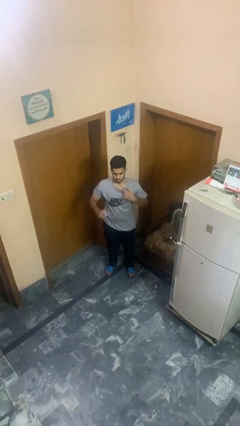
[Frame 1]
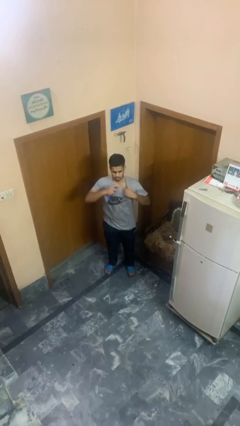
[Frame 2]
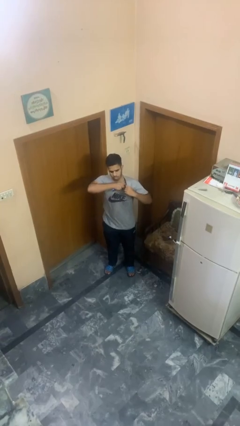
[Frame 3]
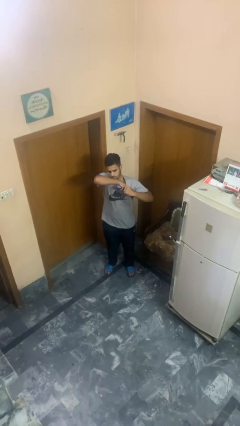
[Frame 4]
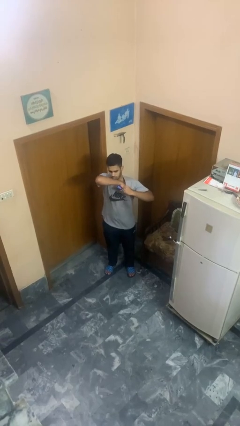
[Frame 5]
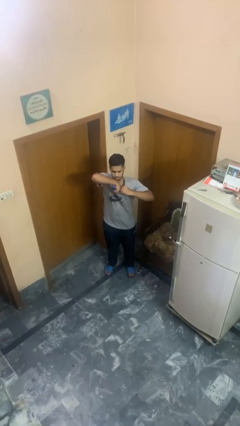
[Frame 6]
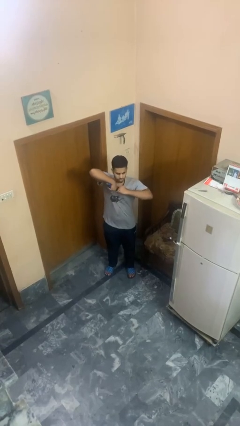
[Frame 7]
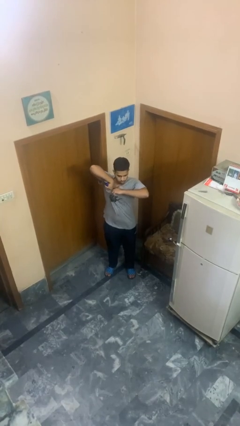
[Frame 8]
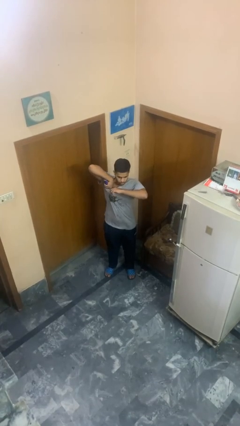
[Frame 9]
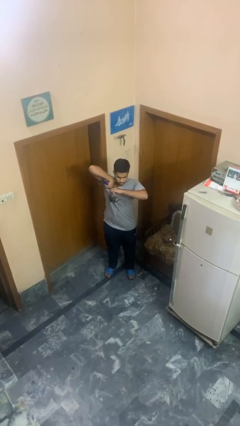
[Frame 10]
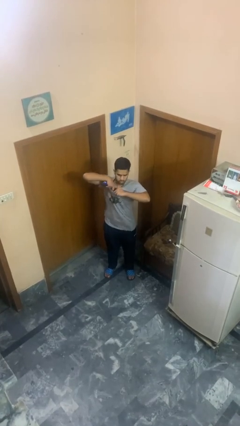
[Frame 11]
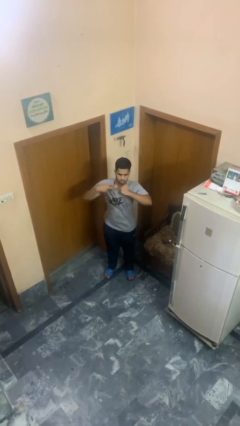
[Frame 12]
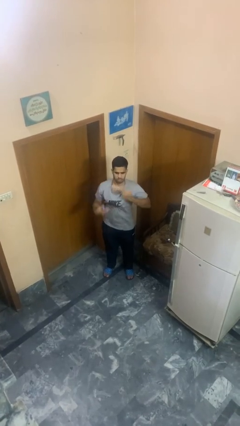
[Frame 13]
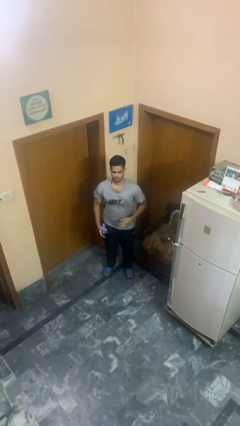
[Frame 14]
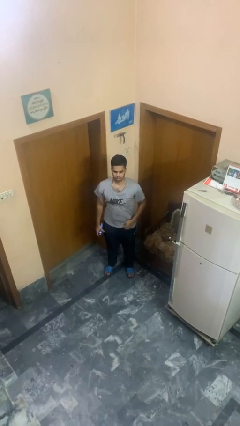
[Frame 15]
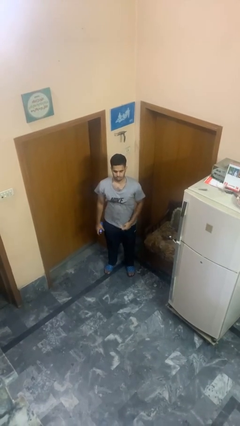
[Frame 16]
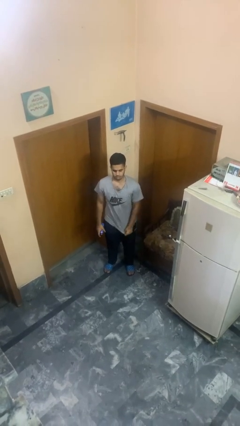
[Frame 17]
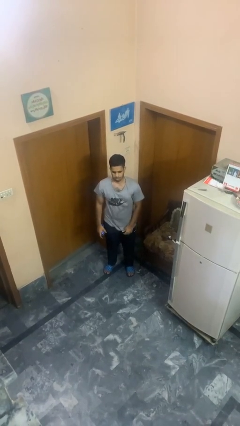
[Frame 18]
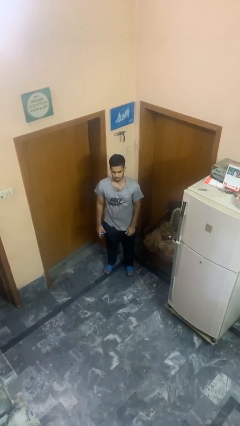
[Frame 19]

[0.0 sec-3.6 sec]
person applies deodorant

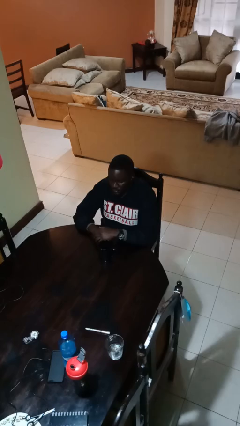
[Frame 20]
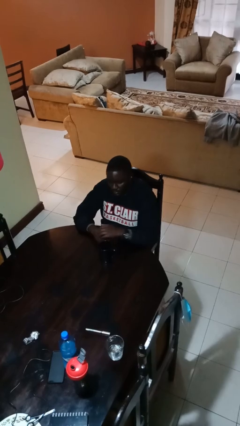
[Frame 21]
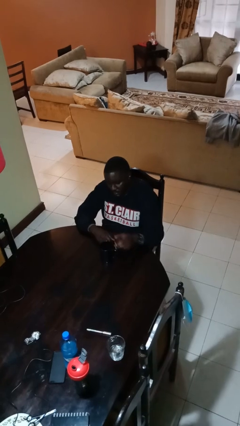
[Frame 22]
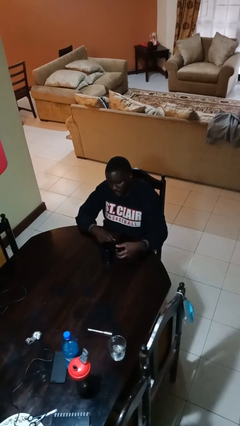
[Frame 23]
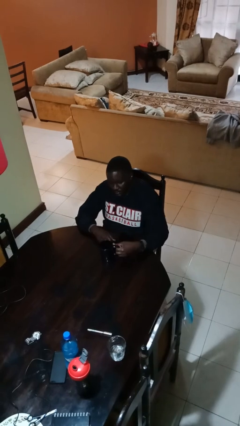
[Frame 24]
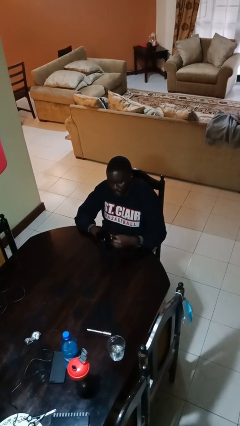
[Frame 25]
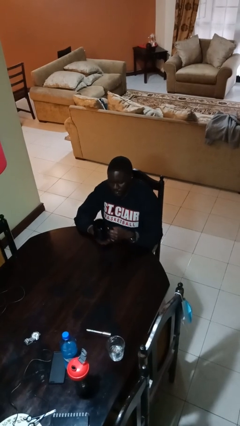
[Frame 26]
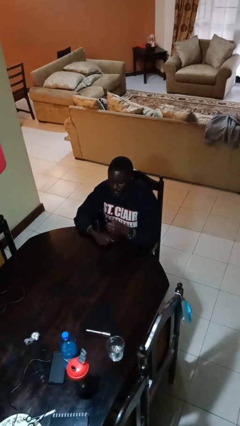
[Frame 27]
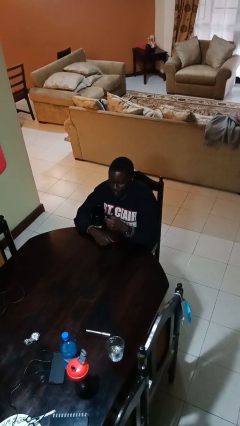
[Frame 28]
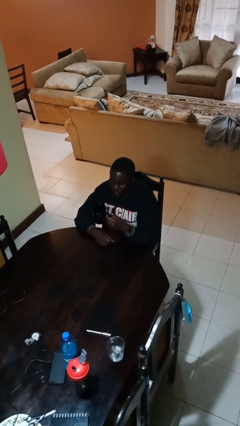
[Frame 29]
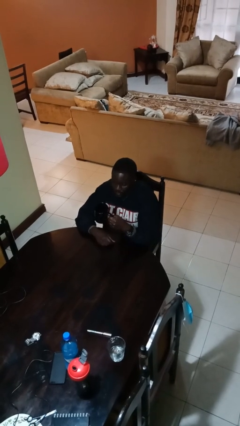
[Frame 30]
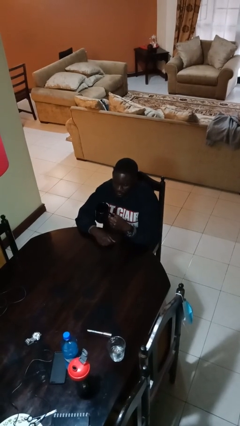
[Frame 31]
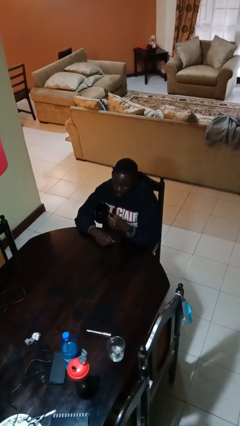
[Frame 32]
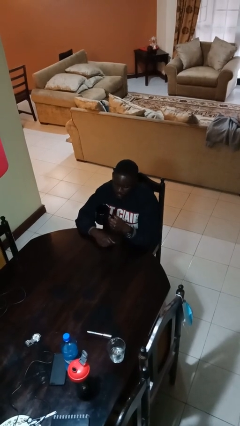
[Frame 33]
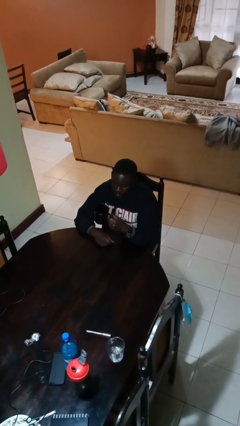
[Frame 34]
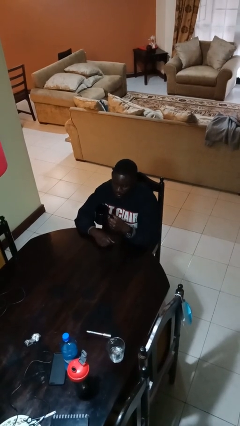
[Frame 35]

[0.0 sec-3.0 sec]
person picks up object from table

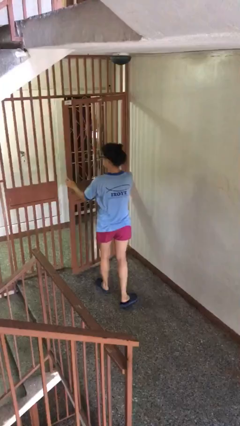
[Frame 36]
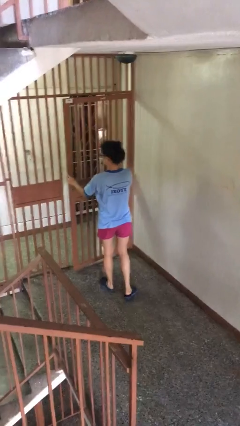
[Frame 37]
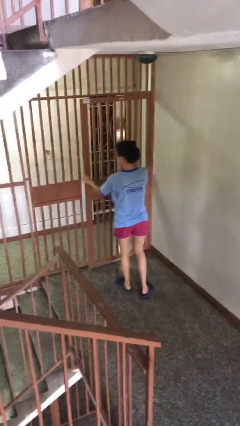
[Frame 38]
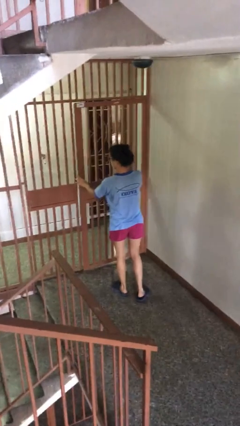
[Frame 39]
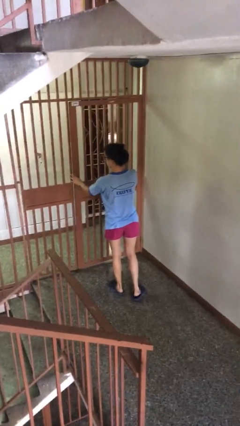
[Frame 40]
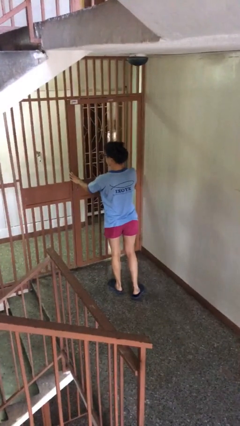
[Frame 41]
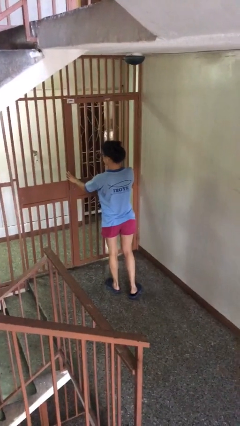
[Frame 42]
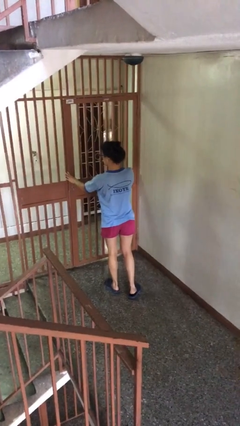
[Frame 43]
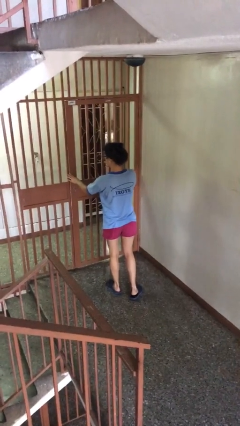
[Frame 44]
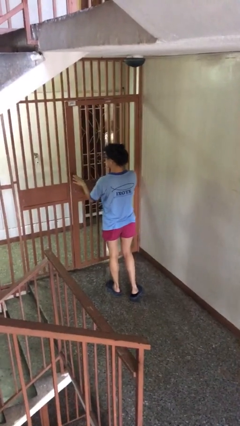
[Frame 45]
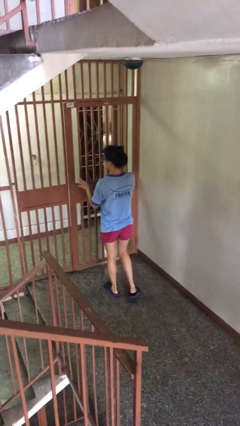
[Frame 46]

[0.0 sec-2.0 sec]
person closes facility door

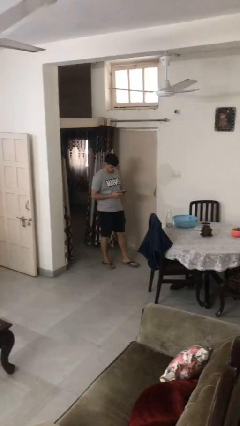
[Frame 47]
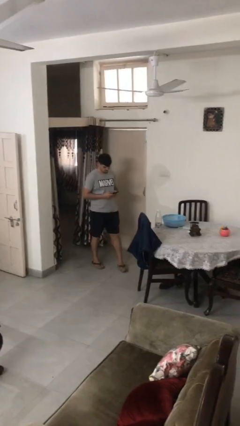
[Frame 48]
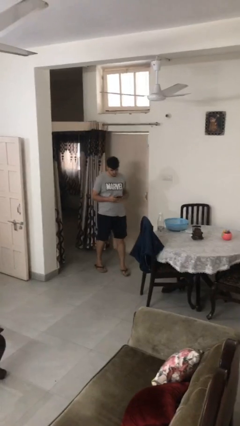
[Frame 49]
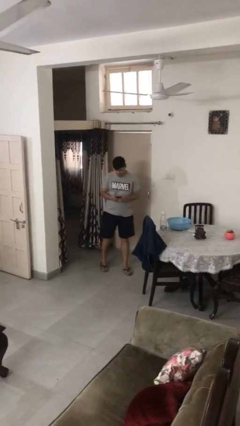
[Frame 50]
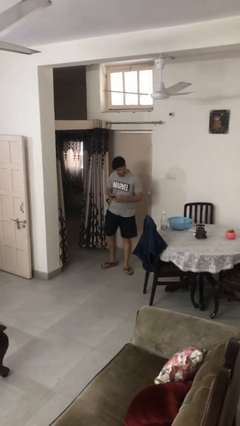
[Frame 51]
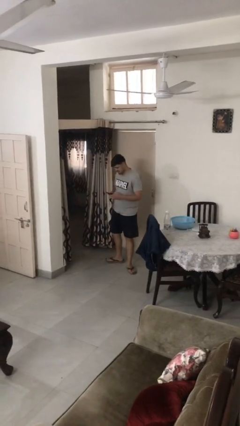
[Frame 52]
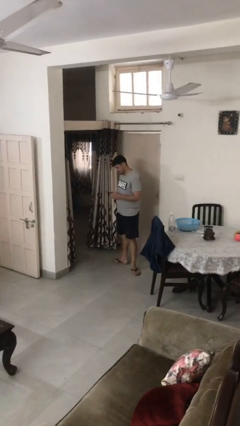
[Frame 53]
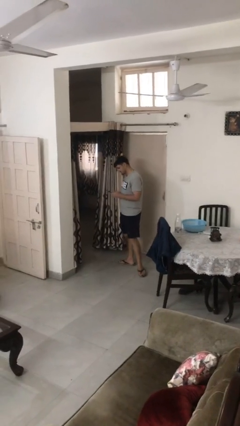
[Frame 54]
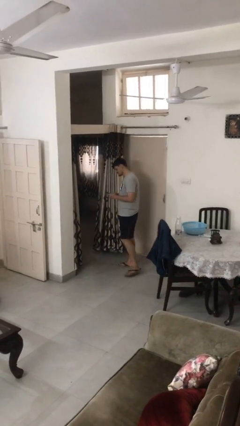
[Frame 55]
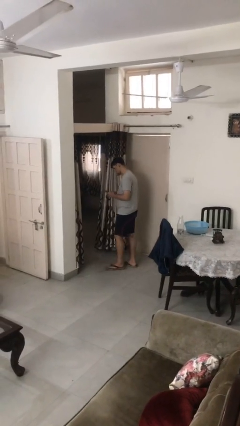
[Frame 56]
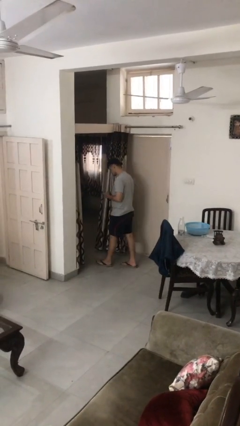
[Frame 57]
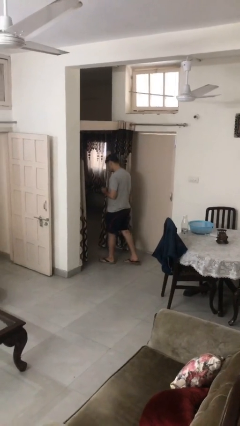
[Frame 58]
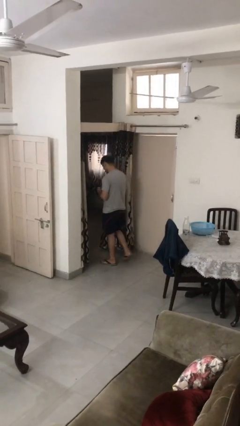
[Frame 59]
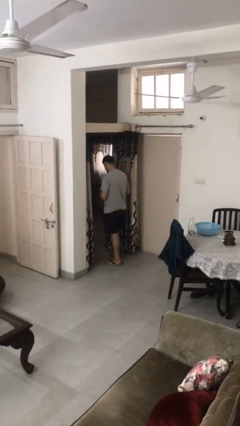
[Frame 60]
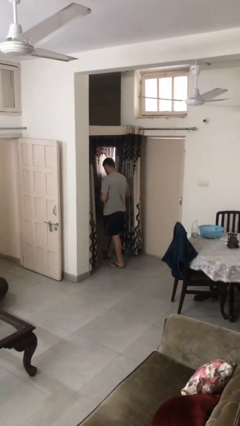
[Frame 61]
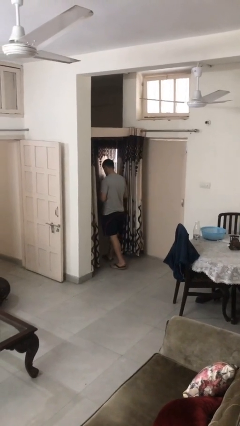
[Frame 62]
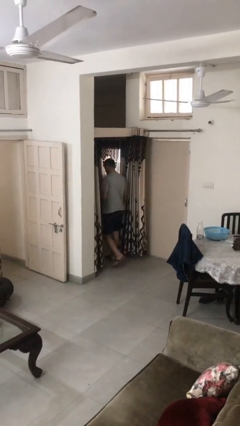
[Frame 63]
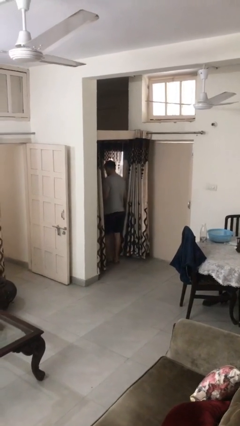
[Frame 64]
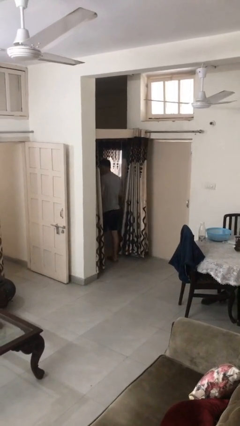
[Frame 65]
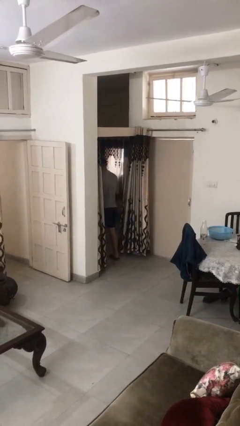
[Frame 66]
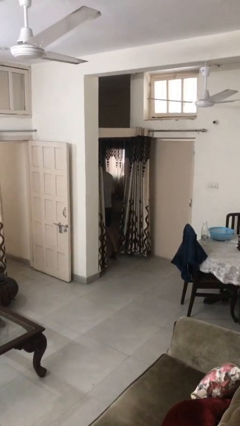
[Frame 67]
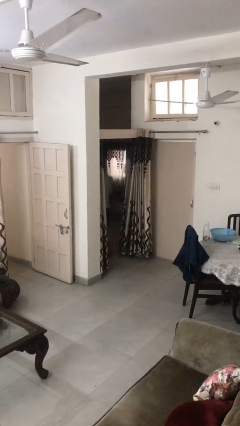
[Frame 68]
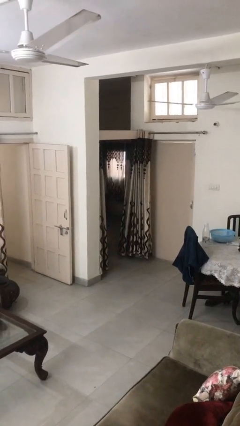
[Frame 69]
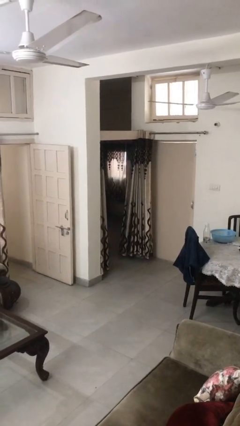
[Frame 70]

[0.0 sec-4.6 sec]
person exits scene through structure

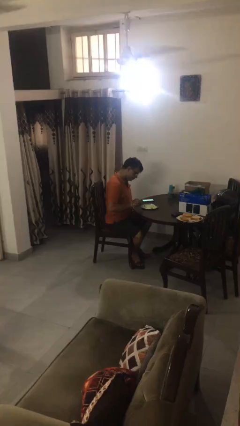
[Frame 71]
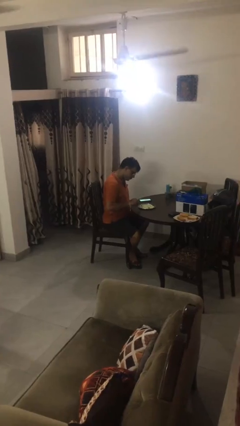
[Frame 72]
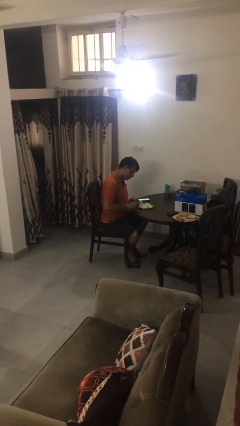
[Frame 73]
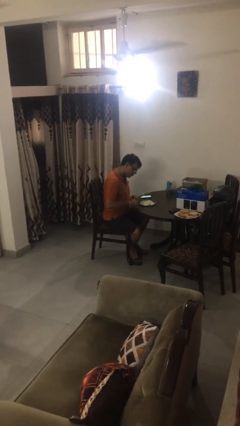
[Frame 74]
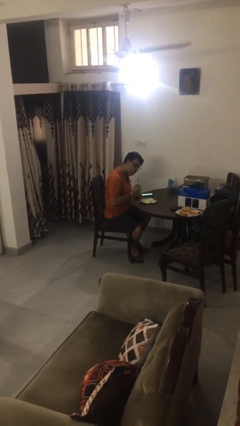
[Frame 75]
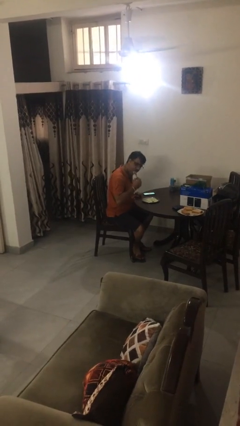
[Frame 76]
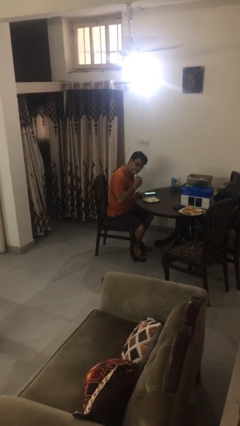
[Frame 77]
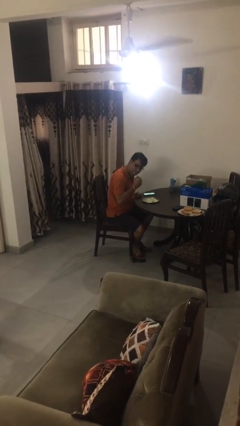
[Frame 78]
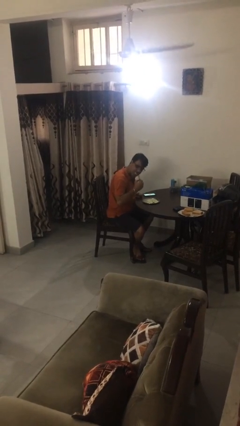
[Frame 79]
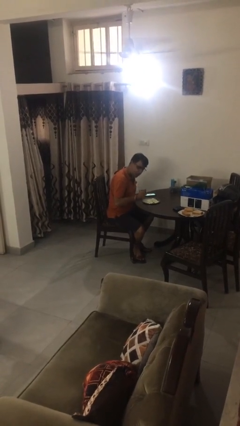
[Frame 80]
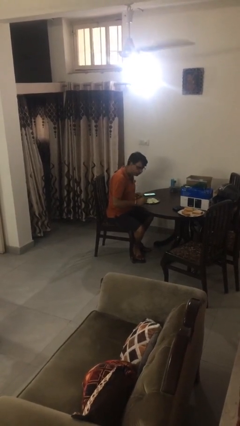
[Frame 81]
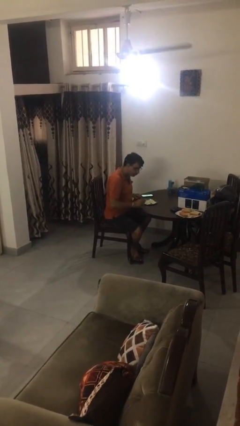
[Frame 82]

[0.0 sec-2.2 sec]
person eats with utensil

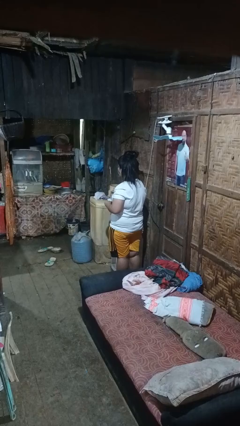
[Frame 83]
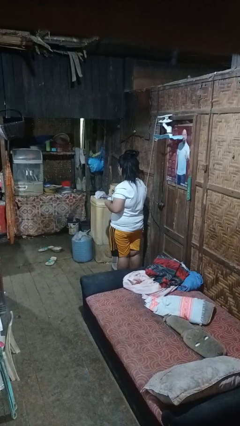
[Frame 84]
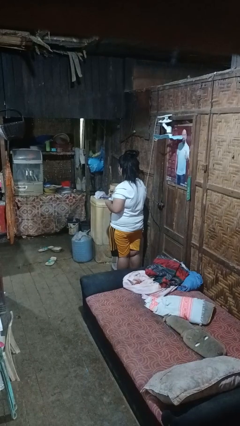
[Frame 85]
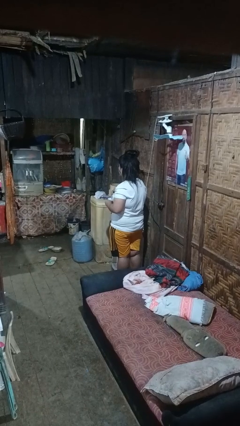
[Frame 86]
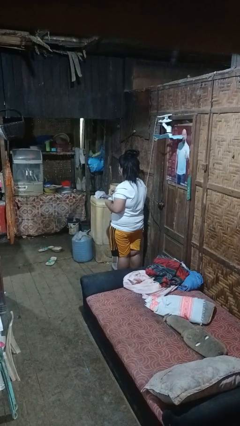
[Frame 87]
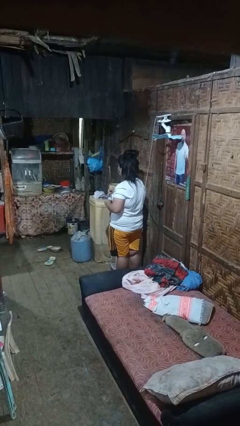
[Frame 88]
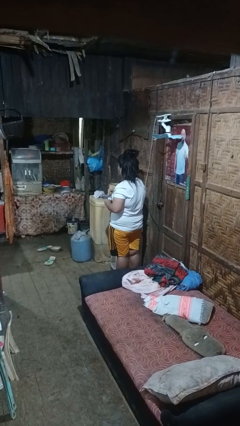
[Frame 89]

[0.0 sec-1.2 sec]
person stirs mug

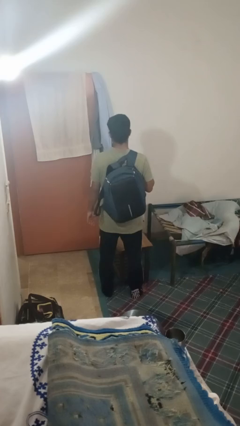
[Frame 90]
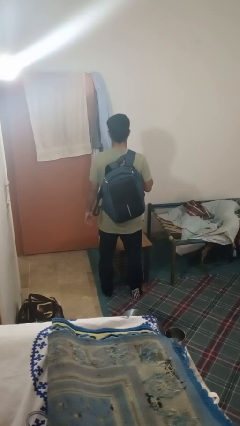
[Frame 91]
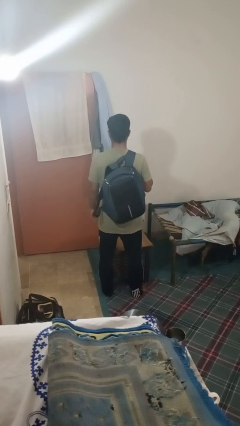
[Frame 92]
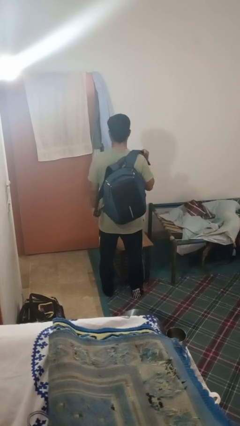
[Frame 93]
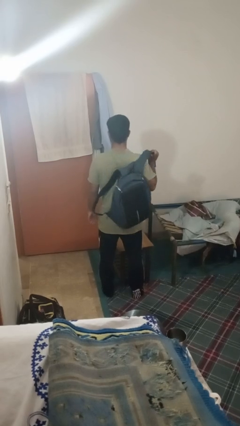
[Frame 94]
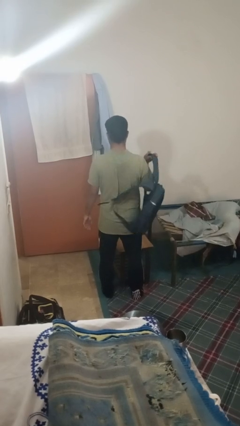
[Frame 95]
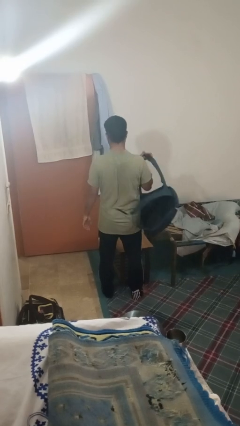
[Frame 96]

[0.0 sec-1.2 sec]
person takes off backpack
